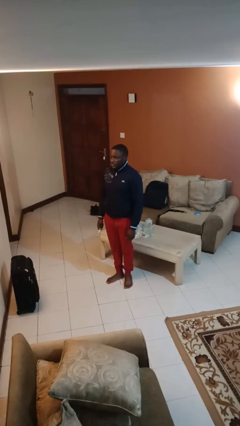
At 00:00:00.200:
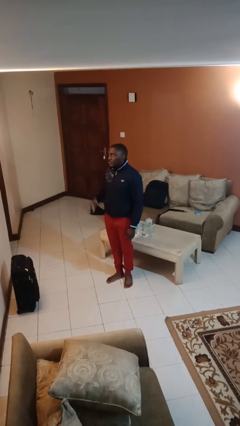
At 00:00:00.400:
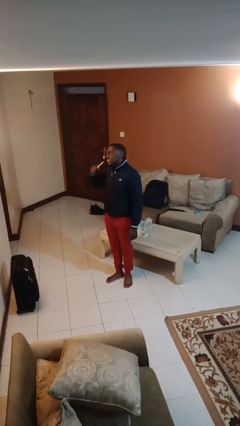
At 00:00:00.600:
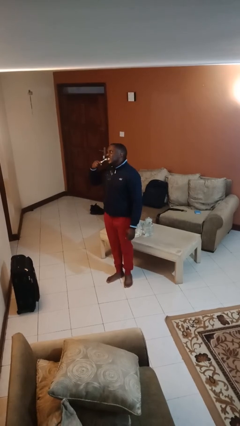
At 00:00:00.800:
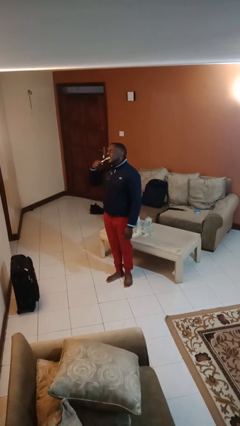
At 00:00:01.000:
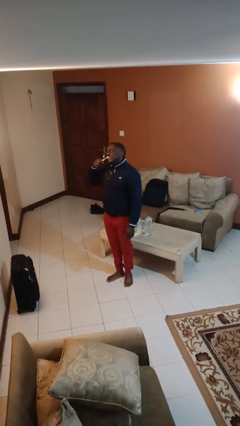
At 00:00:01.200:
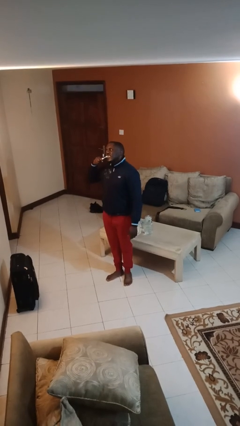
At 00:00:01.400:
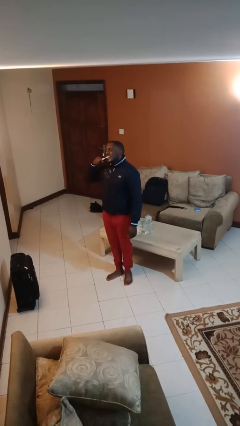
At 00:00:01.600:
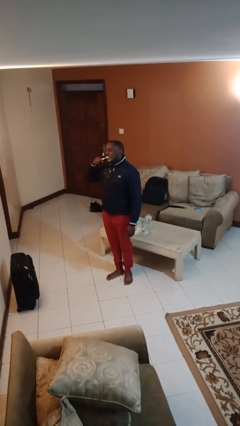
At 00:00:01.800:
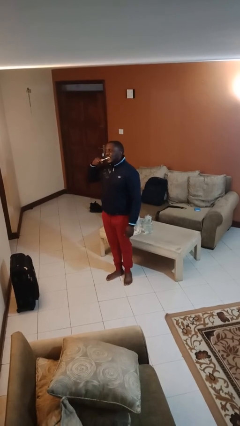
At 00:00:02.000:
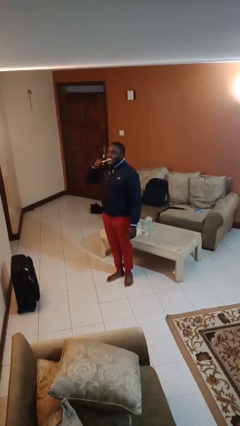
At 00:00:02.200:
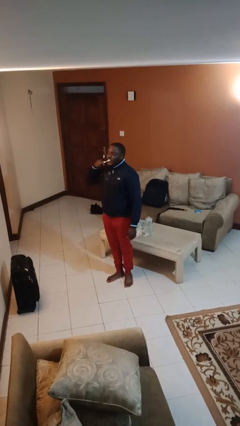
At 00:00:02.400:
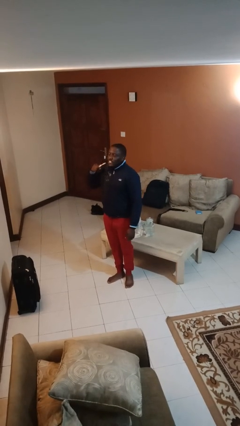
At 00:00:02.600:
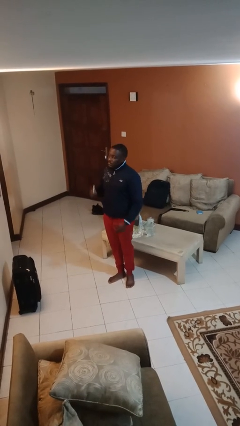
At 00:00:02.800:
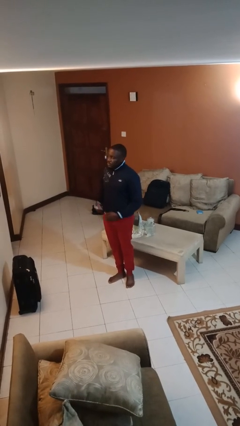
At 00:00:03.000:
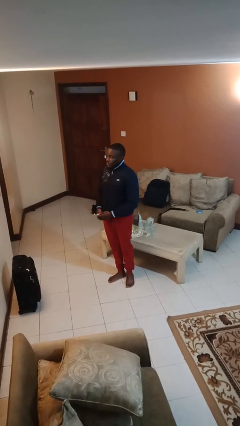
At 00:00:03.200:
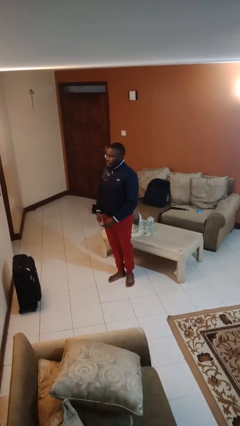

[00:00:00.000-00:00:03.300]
person brushes teeth

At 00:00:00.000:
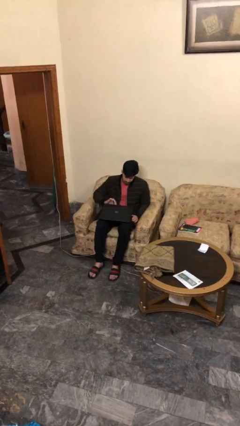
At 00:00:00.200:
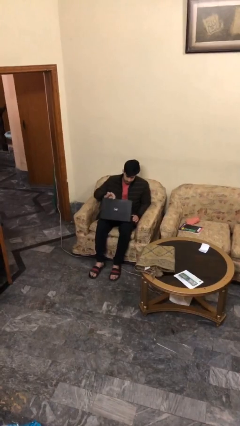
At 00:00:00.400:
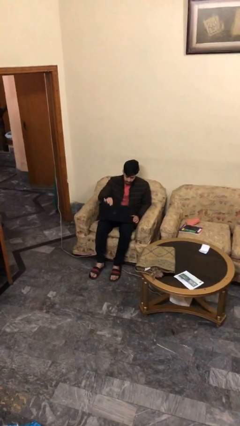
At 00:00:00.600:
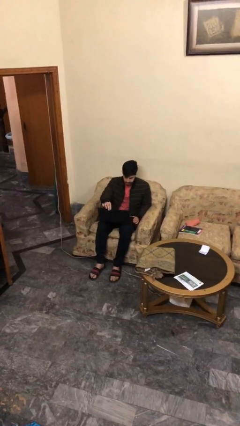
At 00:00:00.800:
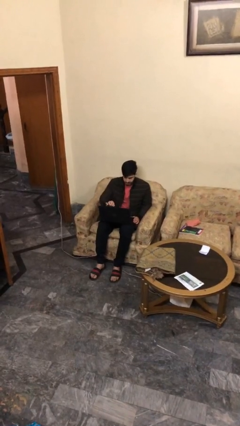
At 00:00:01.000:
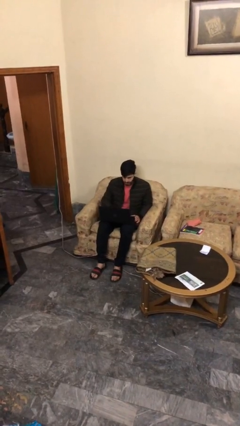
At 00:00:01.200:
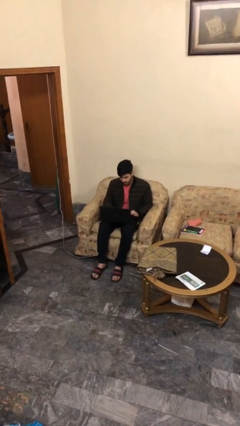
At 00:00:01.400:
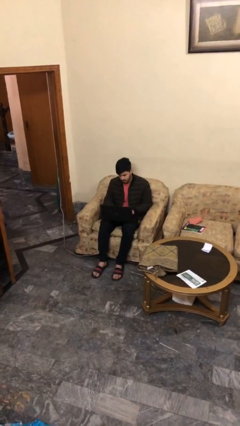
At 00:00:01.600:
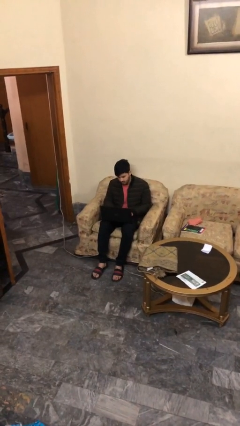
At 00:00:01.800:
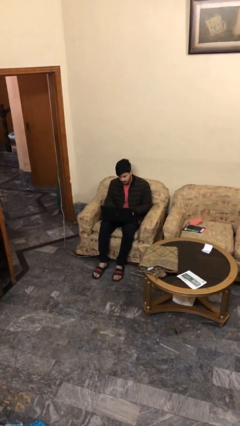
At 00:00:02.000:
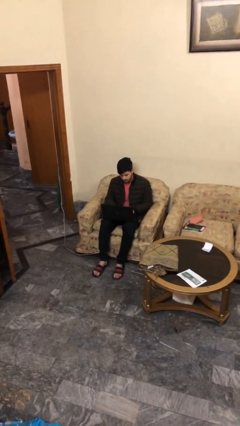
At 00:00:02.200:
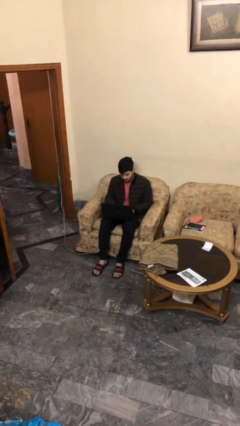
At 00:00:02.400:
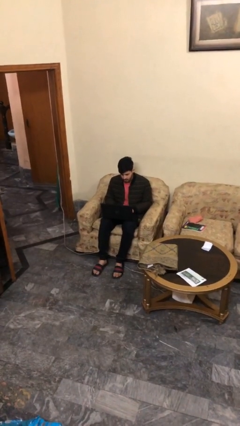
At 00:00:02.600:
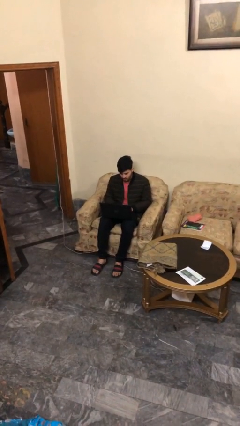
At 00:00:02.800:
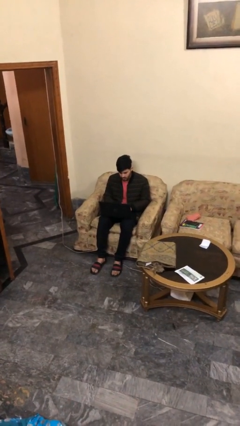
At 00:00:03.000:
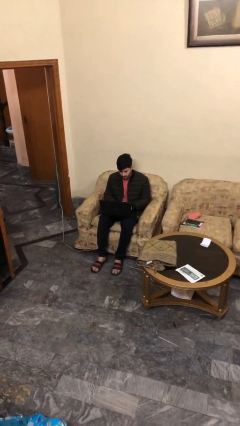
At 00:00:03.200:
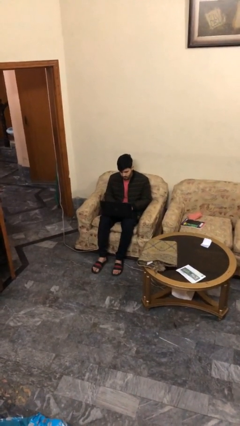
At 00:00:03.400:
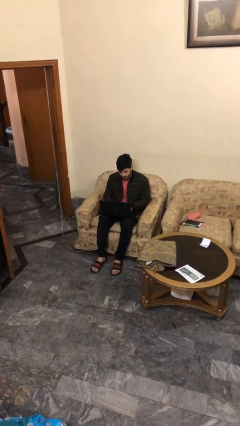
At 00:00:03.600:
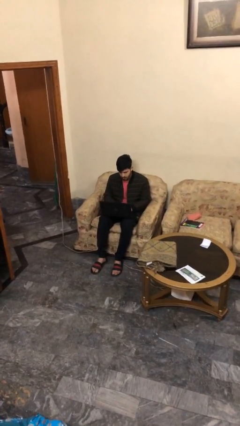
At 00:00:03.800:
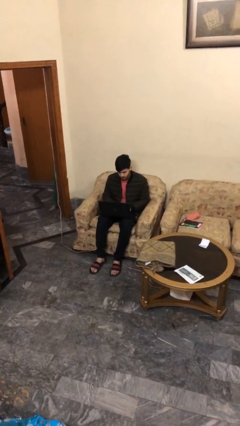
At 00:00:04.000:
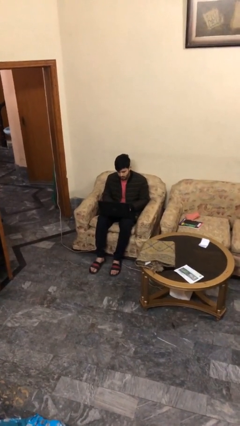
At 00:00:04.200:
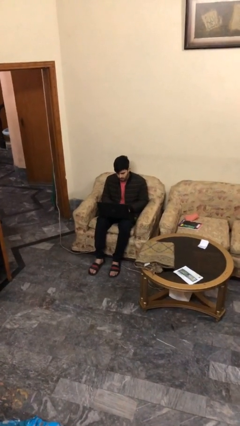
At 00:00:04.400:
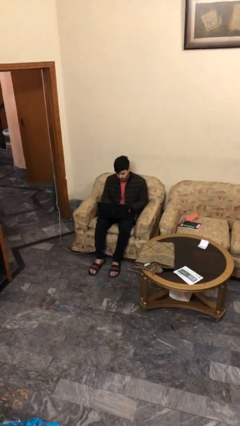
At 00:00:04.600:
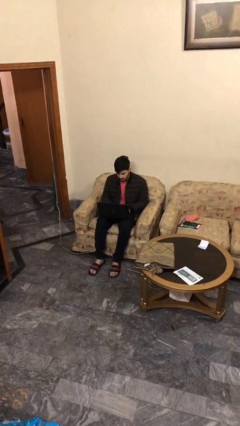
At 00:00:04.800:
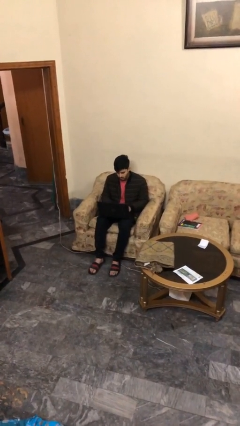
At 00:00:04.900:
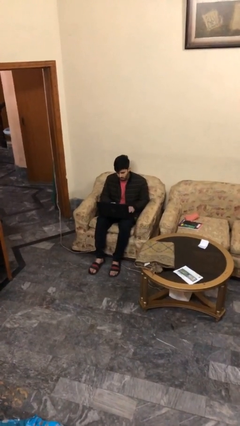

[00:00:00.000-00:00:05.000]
person interacts with laptop

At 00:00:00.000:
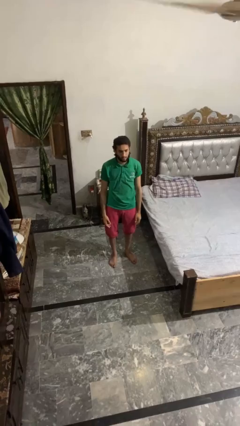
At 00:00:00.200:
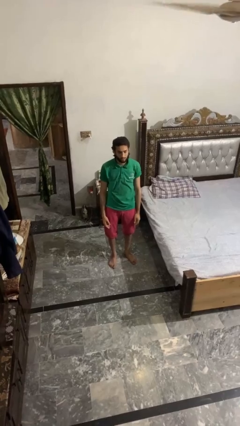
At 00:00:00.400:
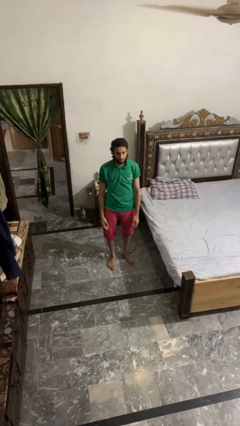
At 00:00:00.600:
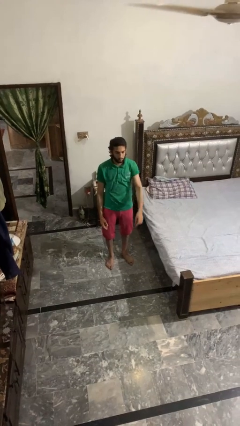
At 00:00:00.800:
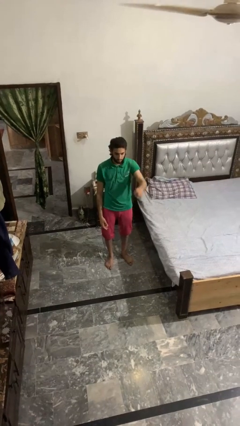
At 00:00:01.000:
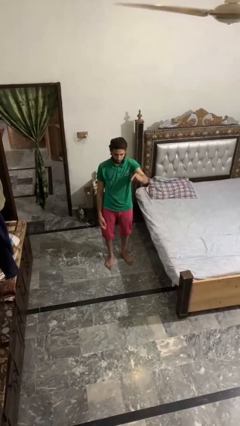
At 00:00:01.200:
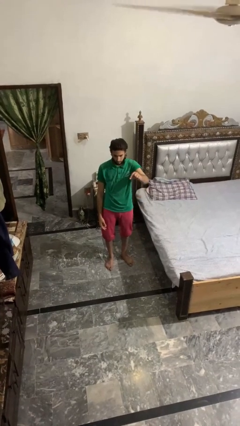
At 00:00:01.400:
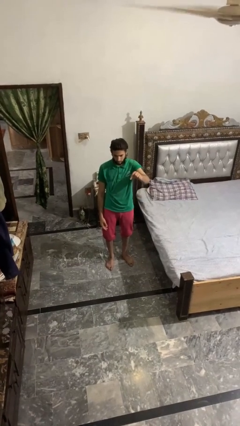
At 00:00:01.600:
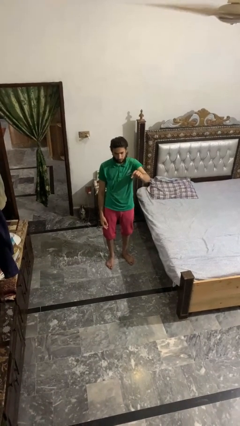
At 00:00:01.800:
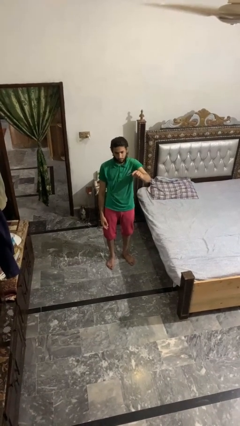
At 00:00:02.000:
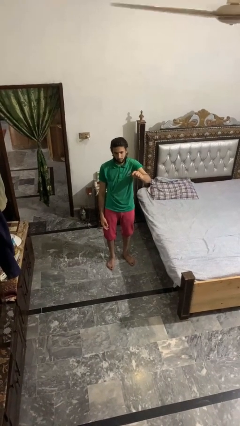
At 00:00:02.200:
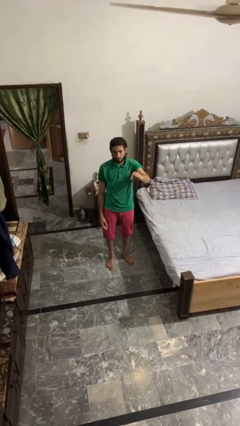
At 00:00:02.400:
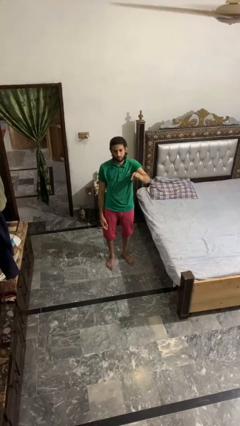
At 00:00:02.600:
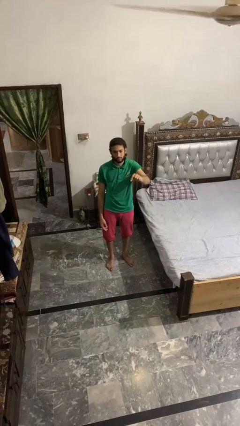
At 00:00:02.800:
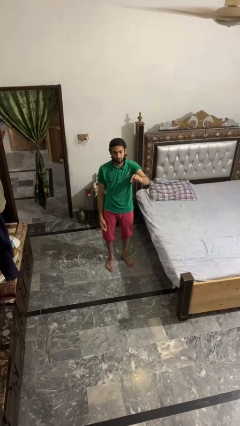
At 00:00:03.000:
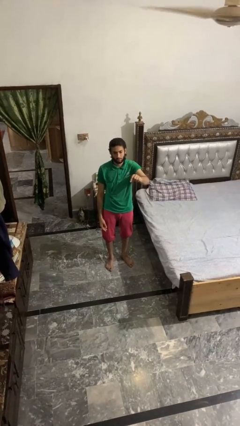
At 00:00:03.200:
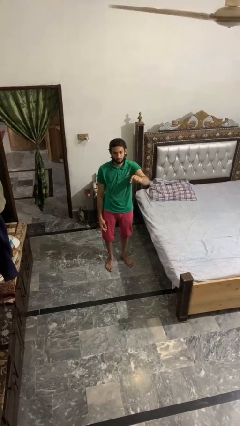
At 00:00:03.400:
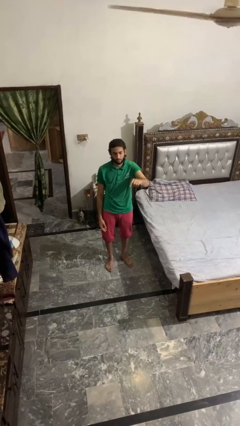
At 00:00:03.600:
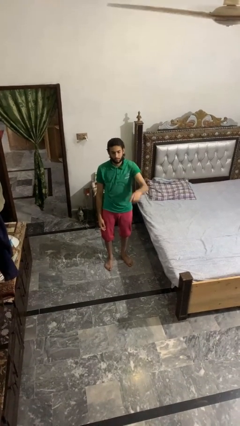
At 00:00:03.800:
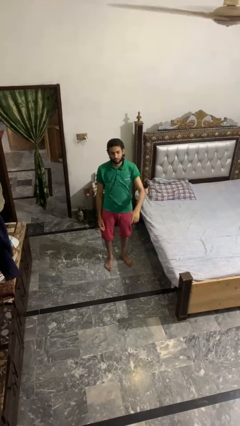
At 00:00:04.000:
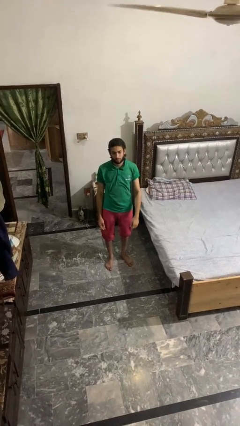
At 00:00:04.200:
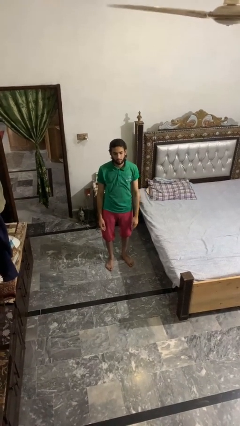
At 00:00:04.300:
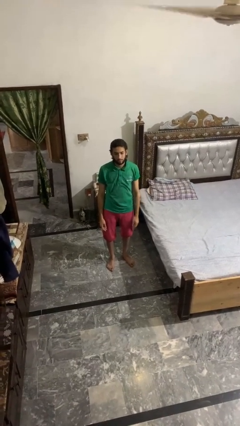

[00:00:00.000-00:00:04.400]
person gestures come here

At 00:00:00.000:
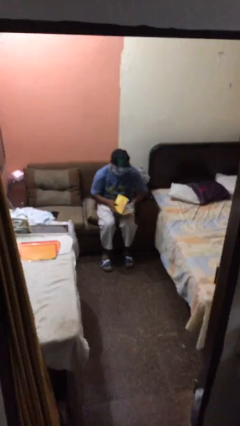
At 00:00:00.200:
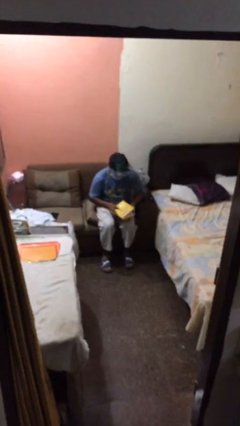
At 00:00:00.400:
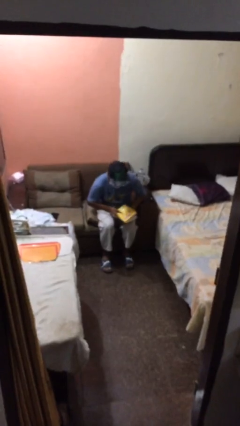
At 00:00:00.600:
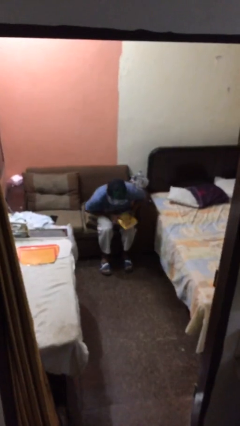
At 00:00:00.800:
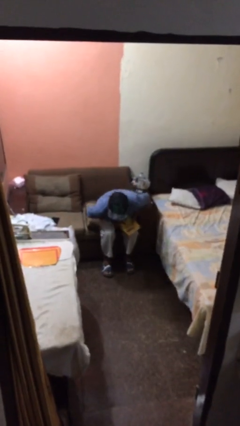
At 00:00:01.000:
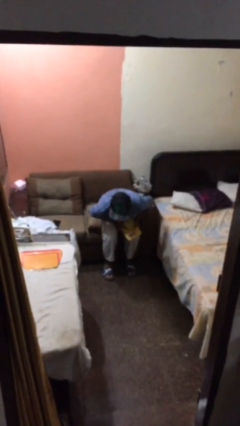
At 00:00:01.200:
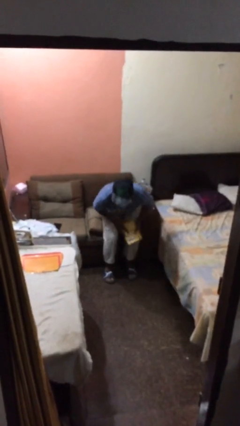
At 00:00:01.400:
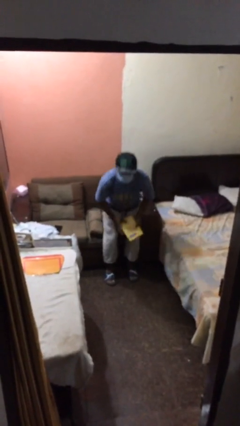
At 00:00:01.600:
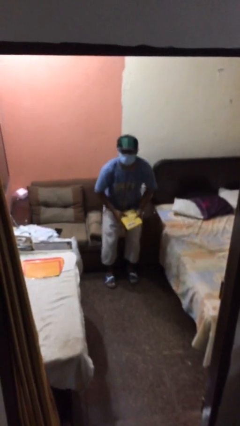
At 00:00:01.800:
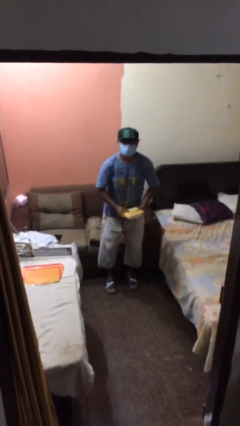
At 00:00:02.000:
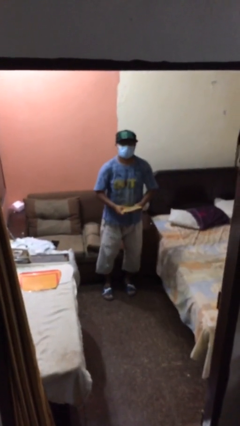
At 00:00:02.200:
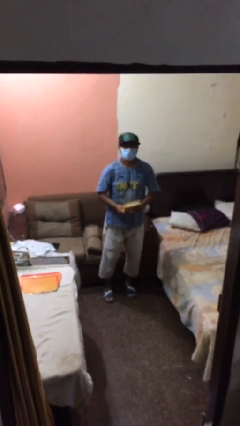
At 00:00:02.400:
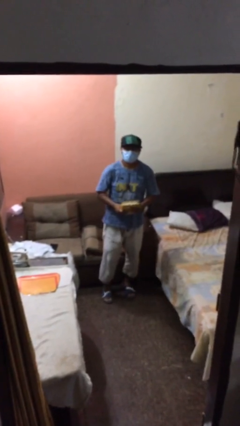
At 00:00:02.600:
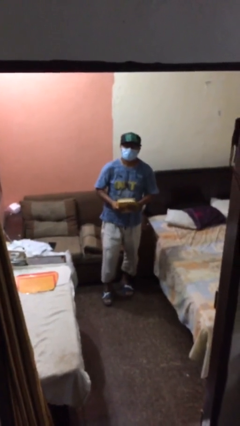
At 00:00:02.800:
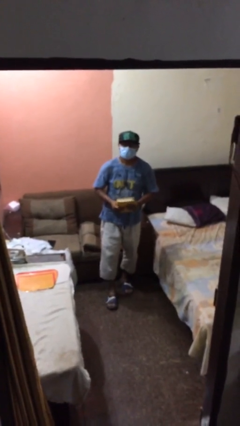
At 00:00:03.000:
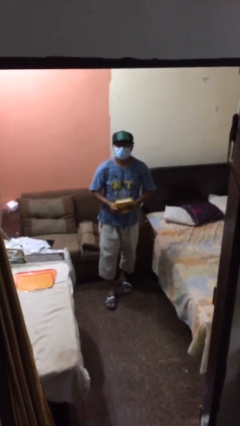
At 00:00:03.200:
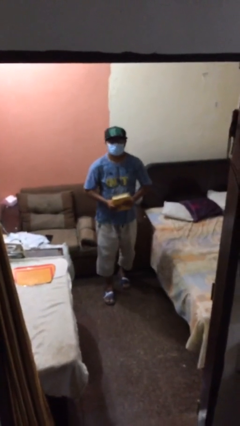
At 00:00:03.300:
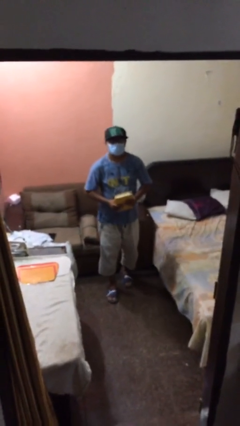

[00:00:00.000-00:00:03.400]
person stands up

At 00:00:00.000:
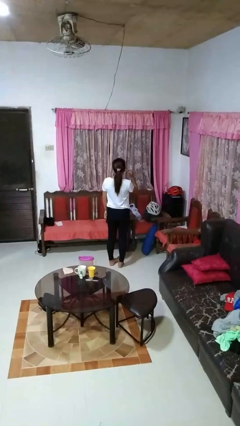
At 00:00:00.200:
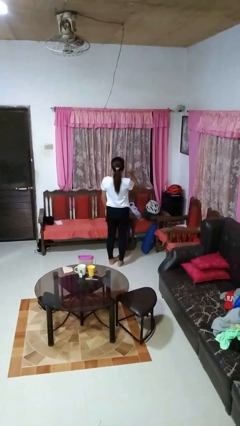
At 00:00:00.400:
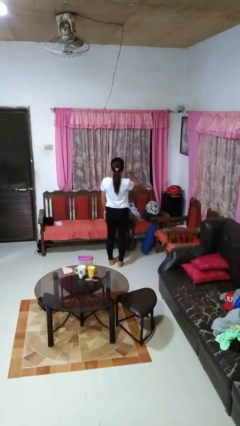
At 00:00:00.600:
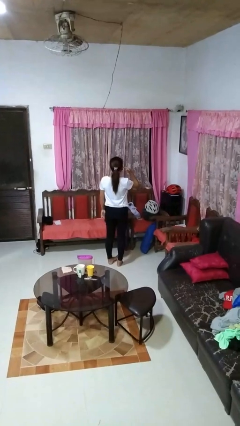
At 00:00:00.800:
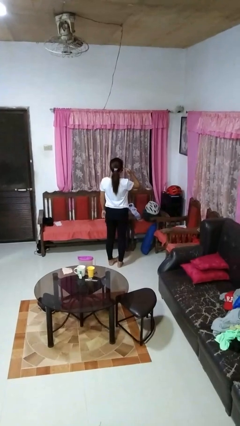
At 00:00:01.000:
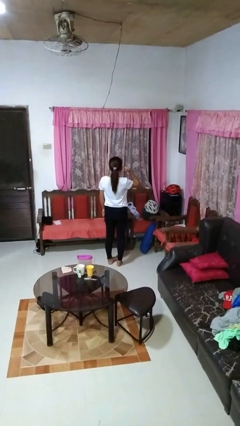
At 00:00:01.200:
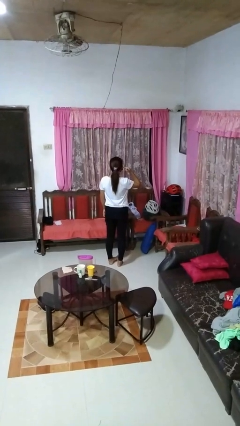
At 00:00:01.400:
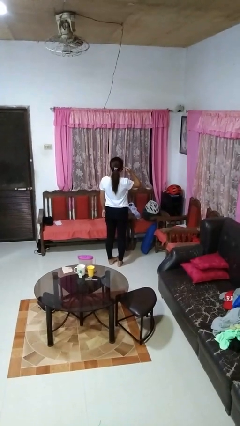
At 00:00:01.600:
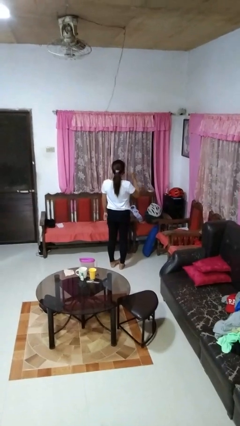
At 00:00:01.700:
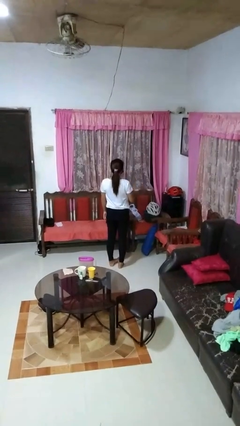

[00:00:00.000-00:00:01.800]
person gestures listen closely
